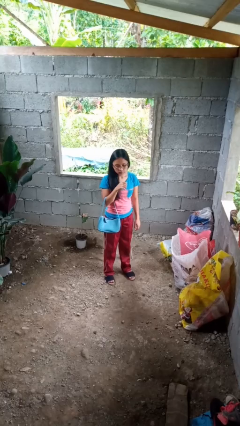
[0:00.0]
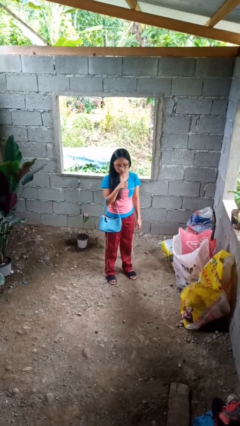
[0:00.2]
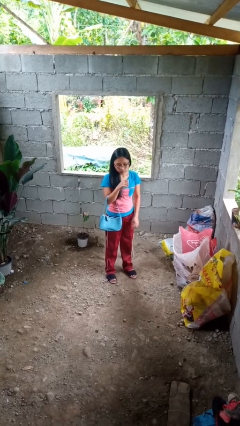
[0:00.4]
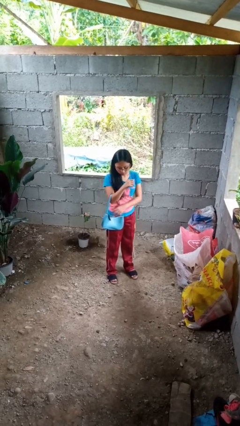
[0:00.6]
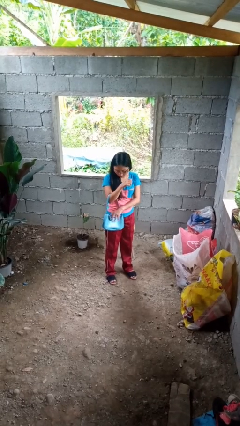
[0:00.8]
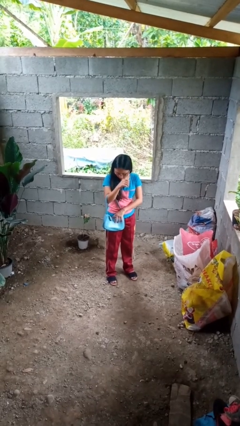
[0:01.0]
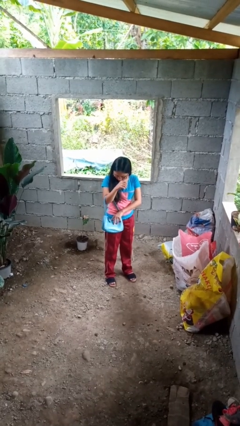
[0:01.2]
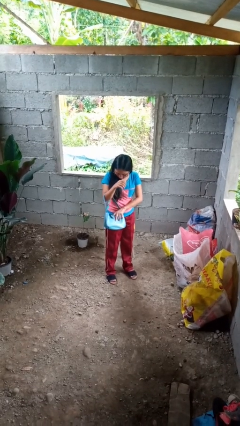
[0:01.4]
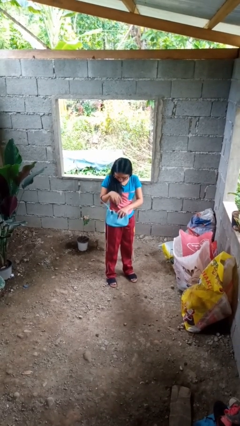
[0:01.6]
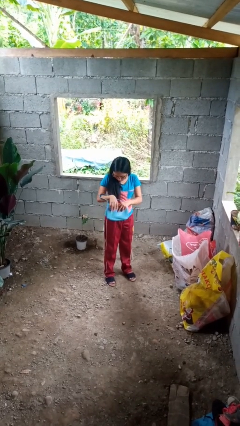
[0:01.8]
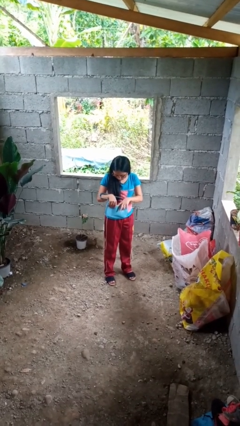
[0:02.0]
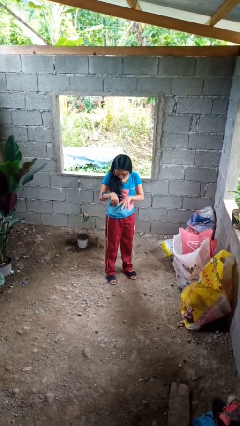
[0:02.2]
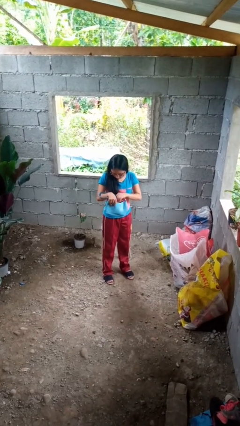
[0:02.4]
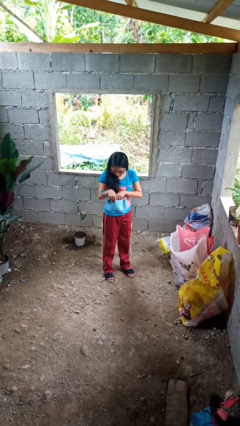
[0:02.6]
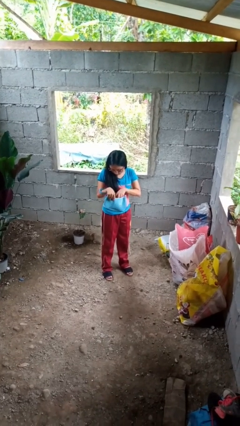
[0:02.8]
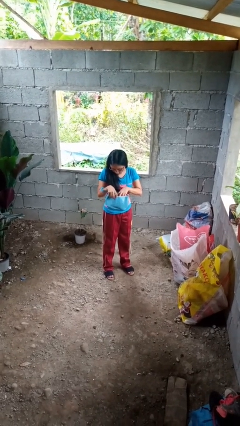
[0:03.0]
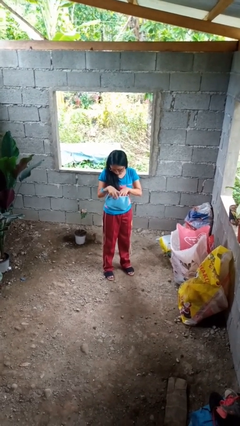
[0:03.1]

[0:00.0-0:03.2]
person searches in purse

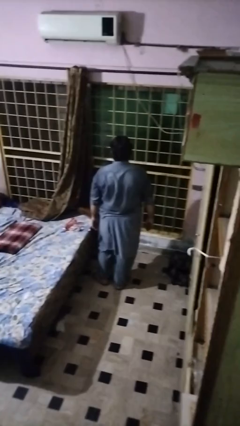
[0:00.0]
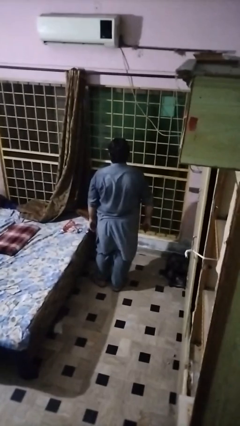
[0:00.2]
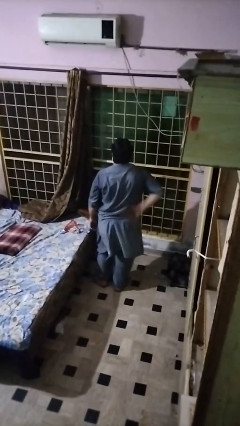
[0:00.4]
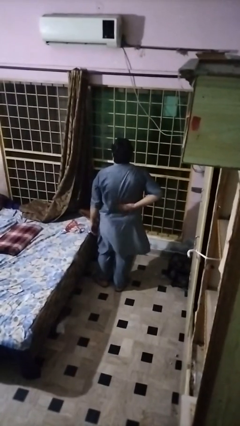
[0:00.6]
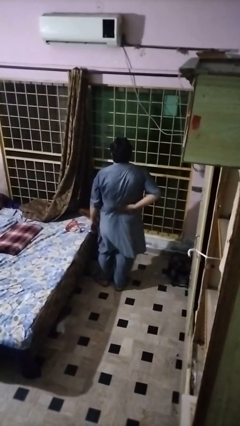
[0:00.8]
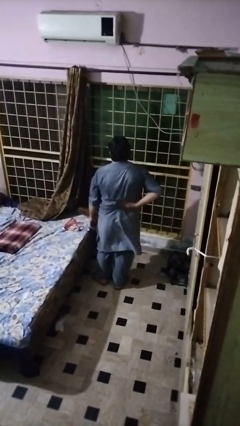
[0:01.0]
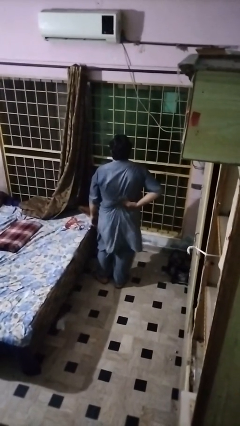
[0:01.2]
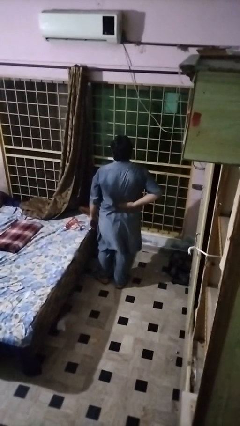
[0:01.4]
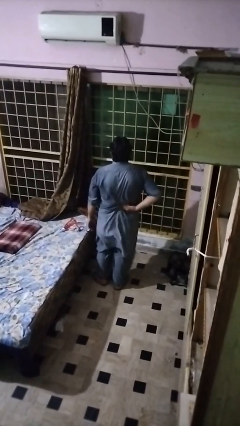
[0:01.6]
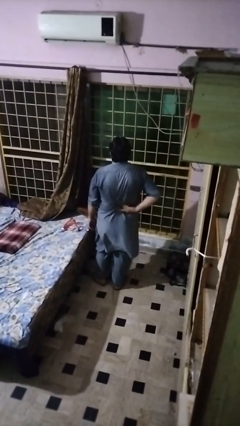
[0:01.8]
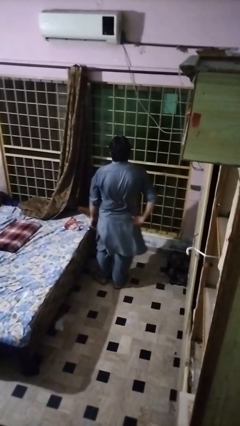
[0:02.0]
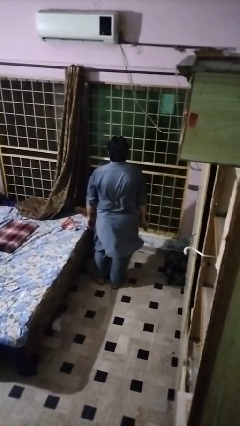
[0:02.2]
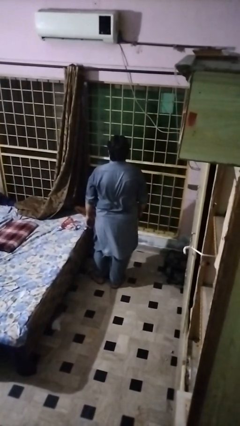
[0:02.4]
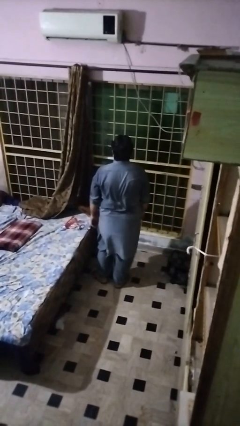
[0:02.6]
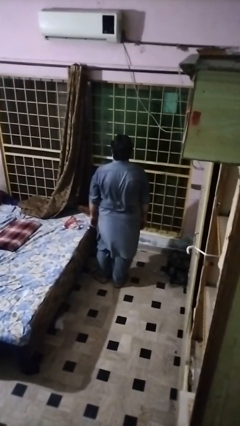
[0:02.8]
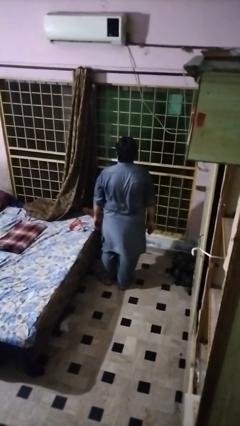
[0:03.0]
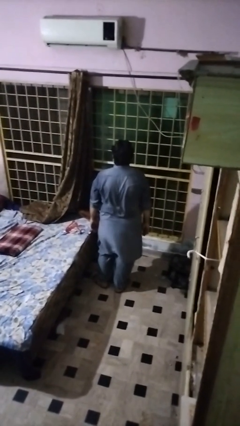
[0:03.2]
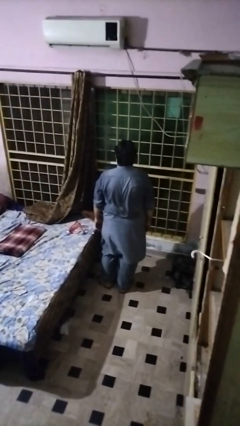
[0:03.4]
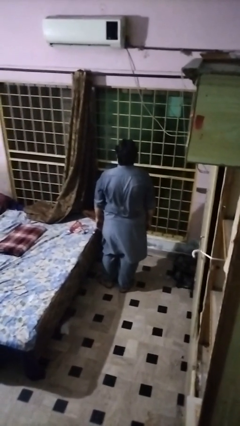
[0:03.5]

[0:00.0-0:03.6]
person swats bug

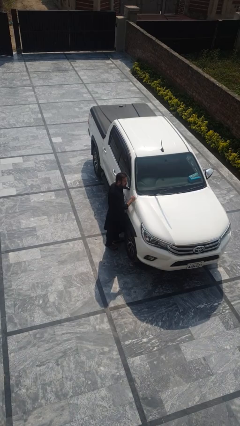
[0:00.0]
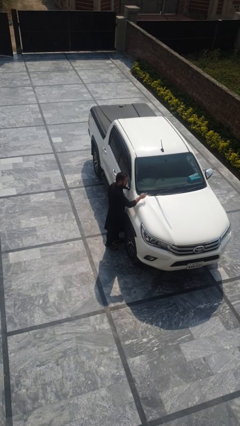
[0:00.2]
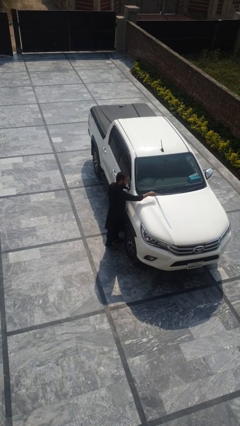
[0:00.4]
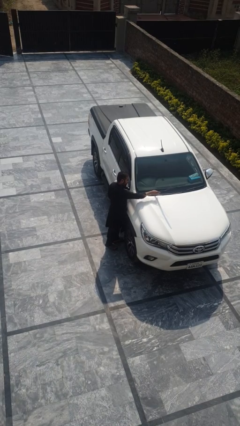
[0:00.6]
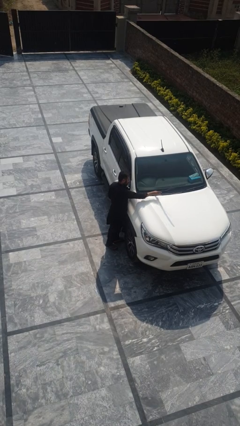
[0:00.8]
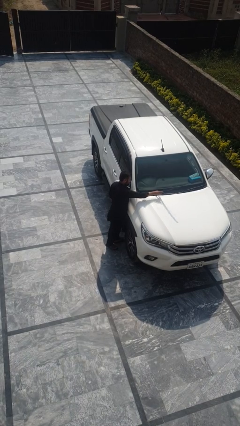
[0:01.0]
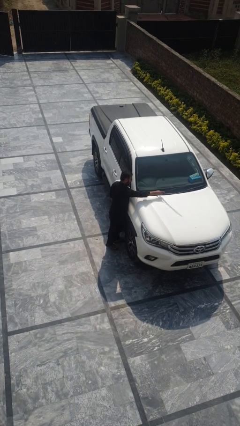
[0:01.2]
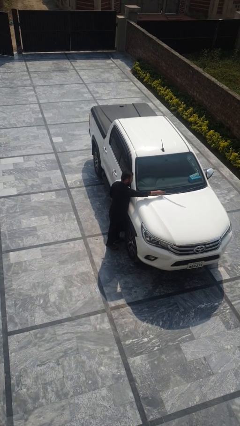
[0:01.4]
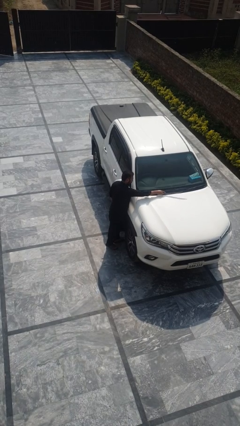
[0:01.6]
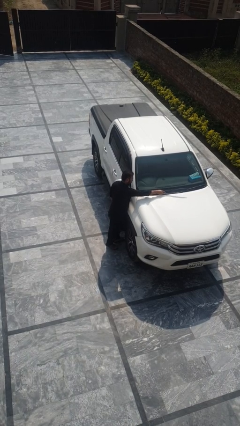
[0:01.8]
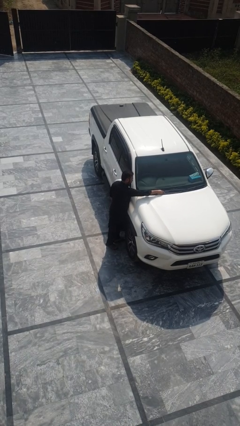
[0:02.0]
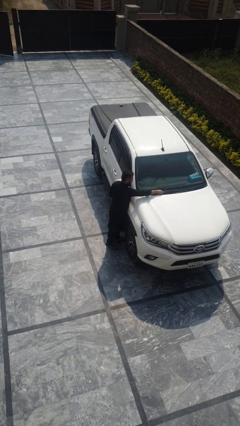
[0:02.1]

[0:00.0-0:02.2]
person flips down car wipers

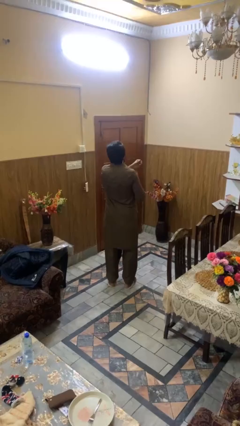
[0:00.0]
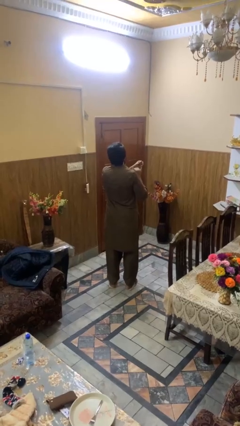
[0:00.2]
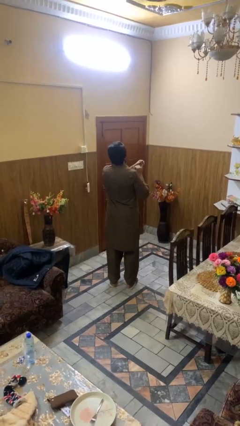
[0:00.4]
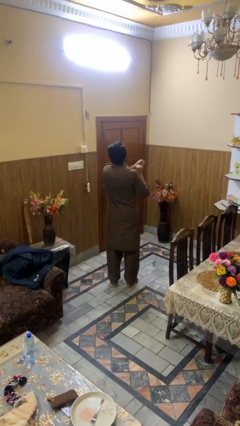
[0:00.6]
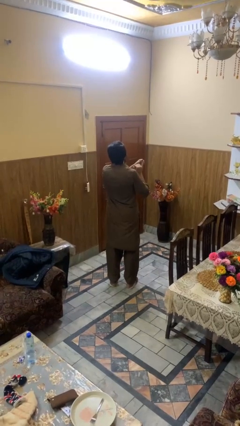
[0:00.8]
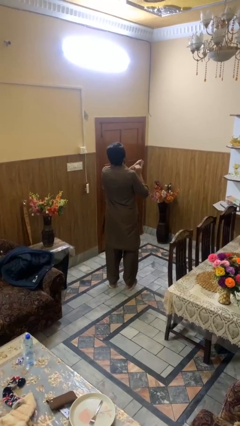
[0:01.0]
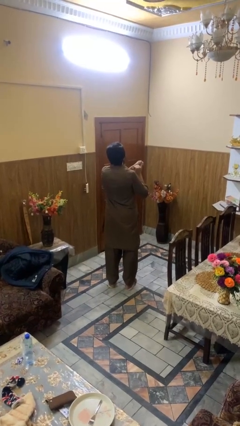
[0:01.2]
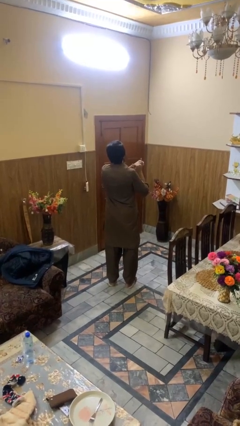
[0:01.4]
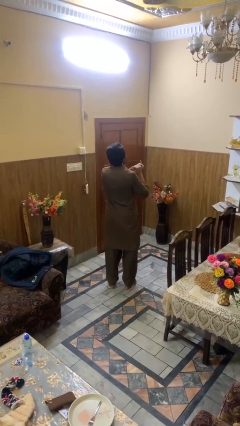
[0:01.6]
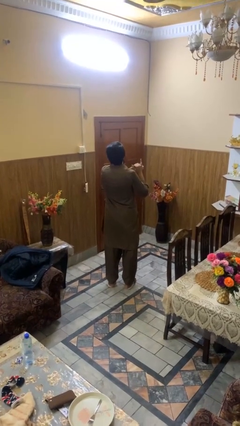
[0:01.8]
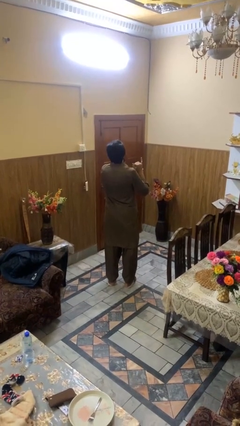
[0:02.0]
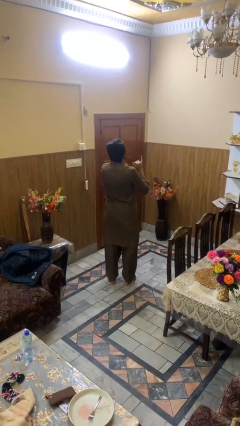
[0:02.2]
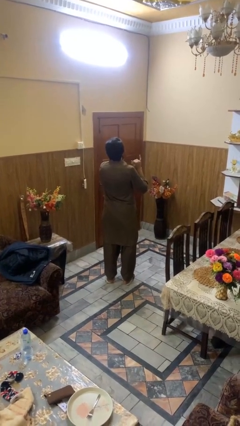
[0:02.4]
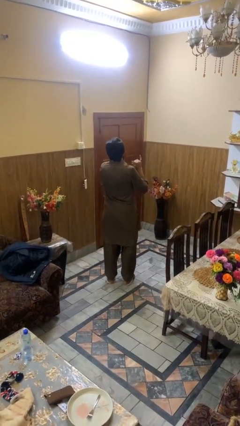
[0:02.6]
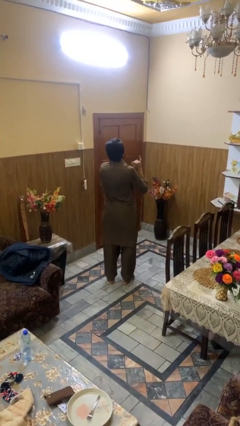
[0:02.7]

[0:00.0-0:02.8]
person puts on ring

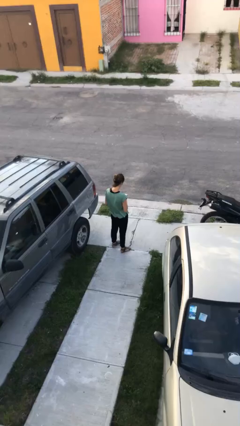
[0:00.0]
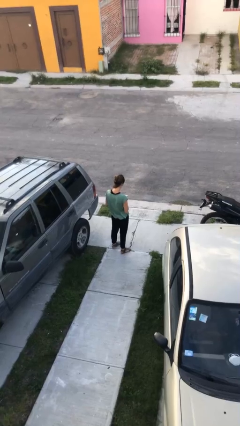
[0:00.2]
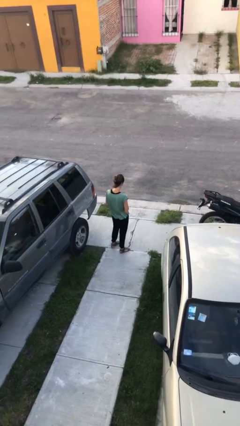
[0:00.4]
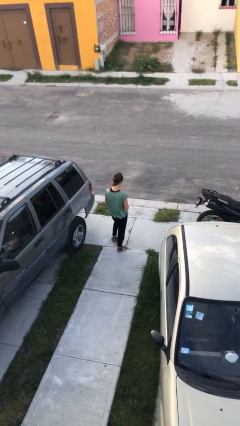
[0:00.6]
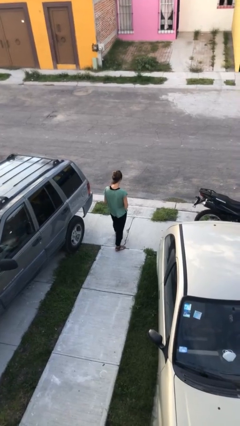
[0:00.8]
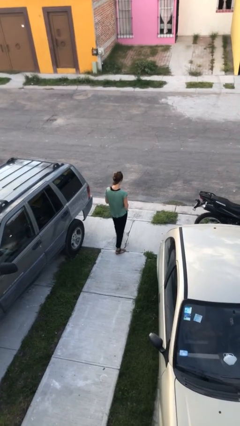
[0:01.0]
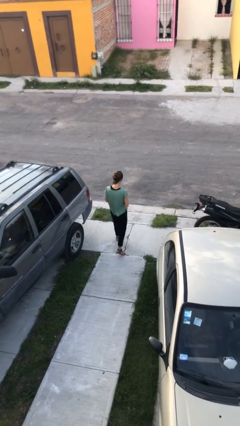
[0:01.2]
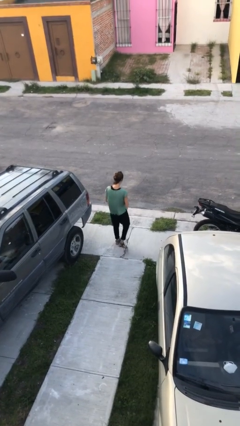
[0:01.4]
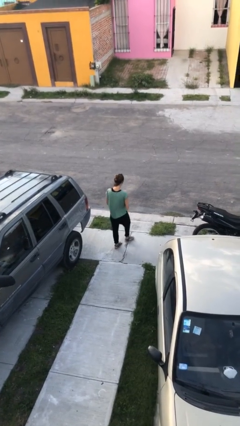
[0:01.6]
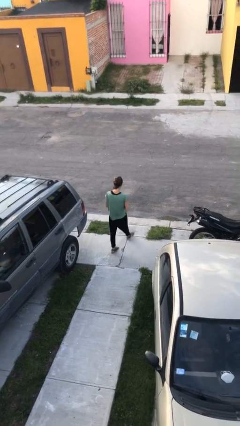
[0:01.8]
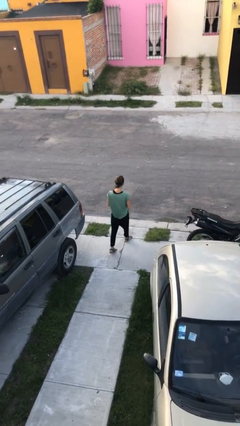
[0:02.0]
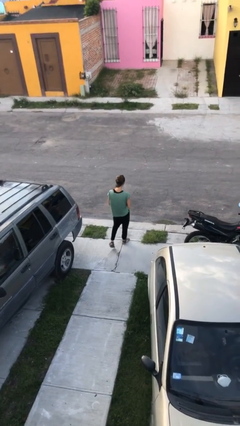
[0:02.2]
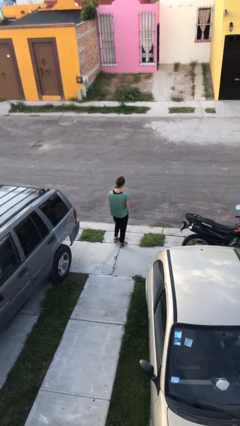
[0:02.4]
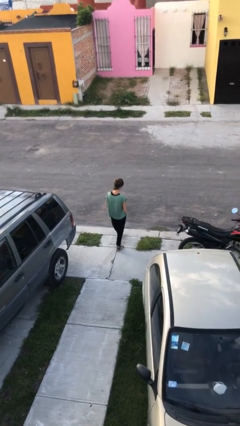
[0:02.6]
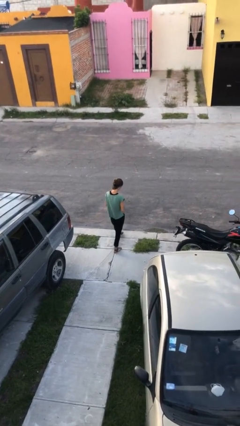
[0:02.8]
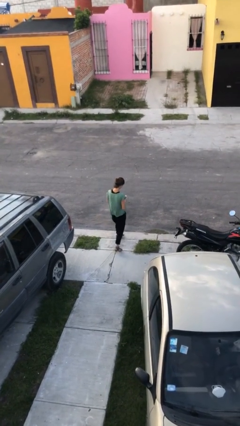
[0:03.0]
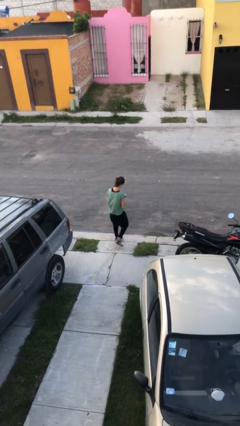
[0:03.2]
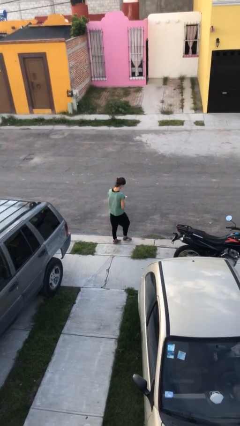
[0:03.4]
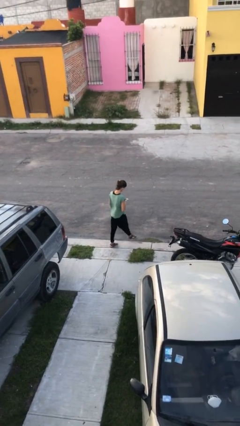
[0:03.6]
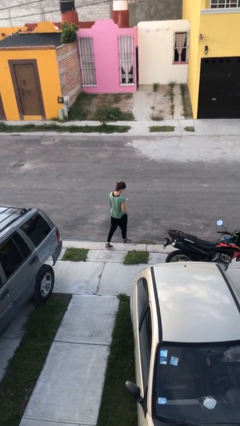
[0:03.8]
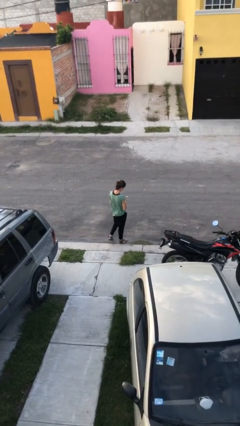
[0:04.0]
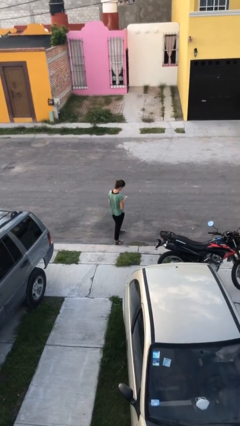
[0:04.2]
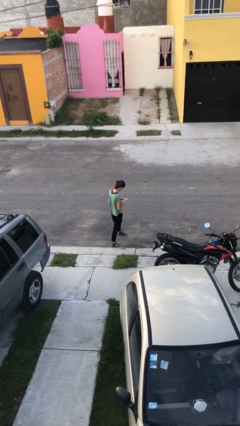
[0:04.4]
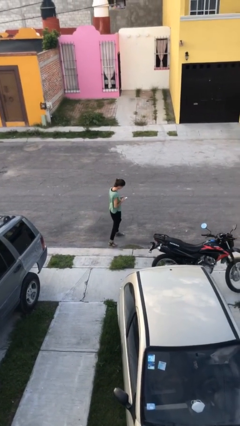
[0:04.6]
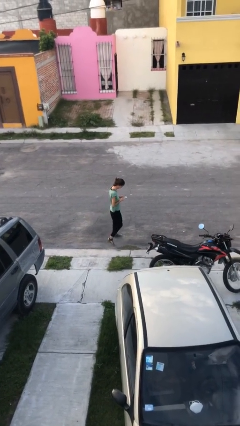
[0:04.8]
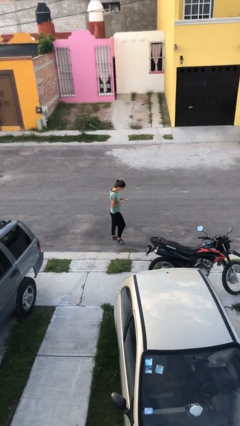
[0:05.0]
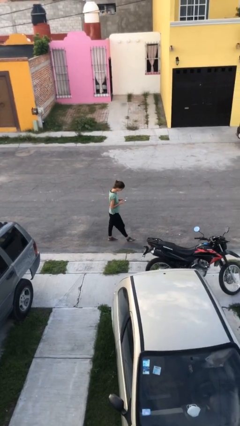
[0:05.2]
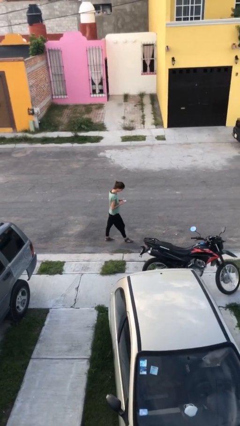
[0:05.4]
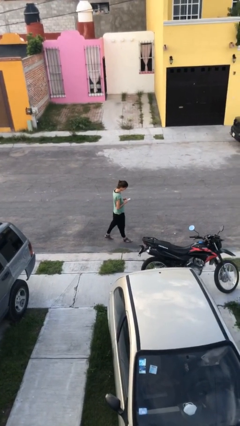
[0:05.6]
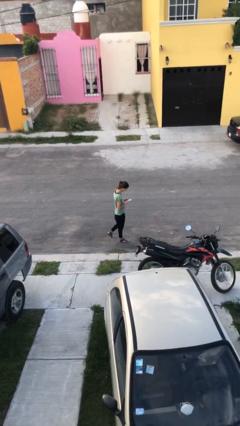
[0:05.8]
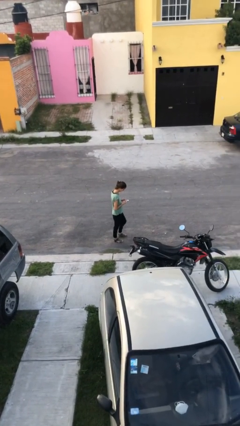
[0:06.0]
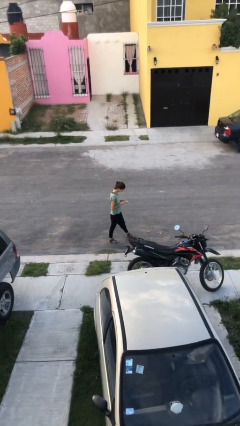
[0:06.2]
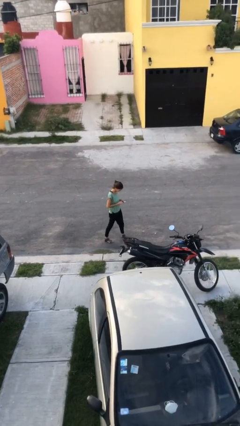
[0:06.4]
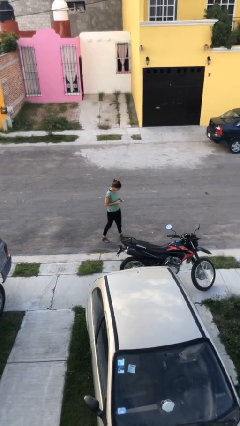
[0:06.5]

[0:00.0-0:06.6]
person texts on phone
